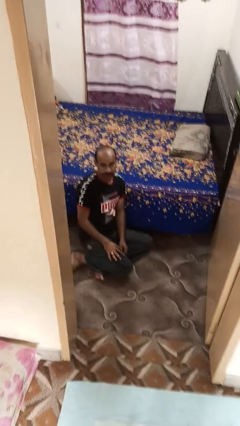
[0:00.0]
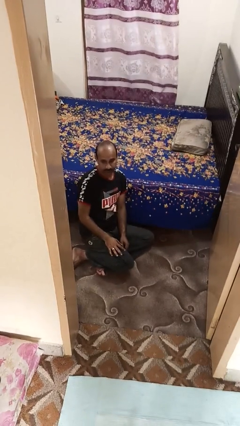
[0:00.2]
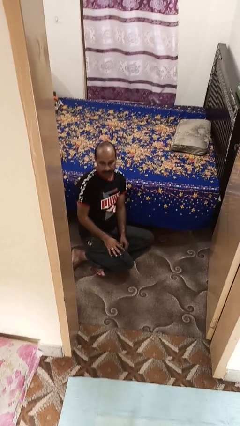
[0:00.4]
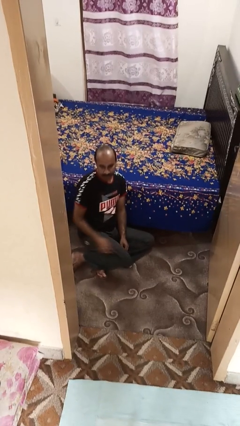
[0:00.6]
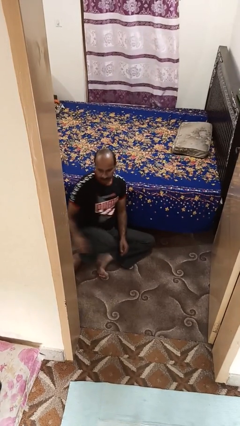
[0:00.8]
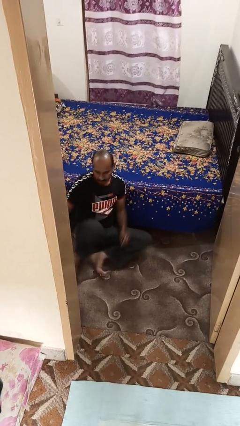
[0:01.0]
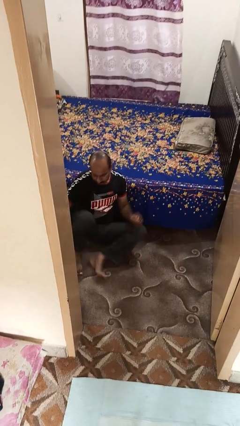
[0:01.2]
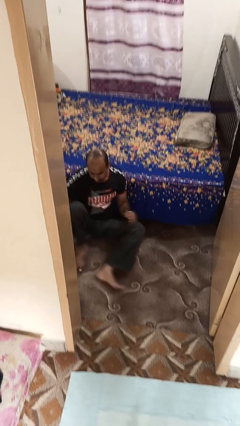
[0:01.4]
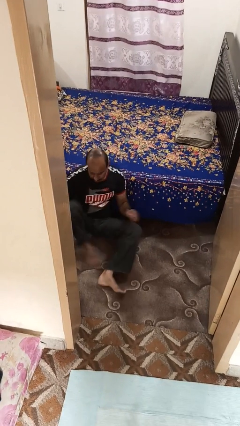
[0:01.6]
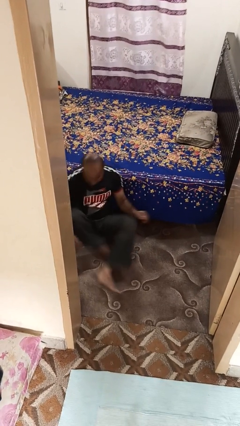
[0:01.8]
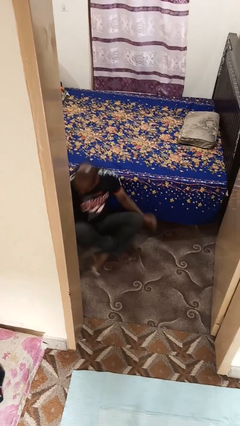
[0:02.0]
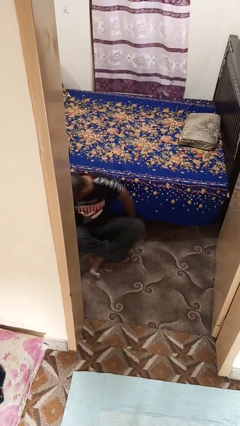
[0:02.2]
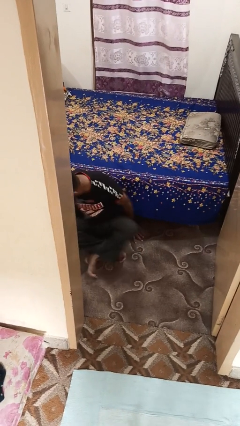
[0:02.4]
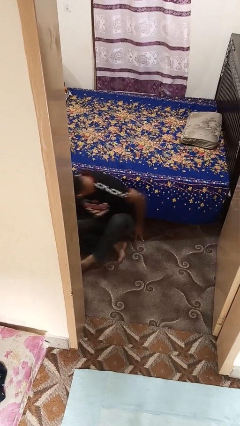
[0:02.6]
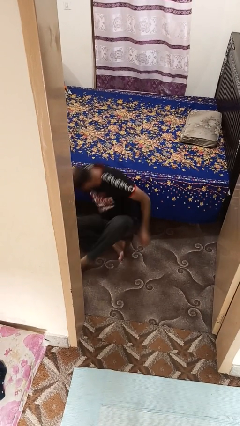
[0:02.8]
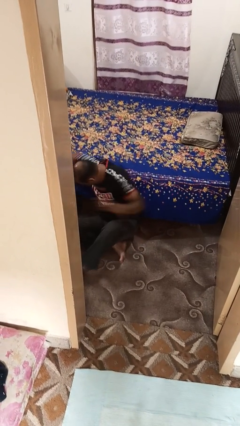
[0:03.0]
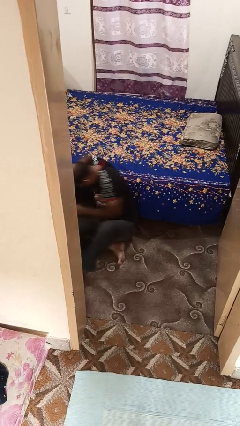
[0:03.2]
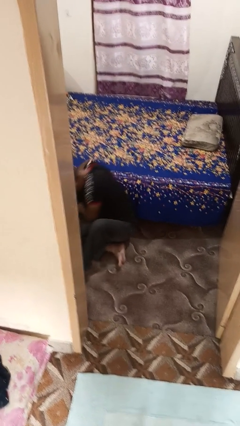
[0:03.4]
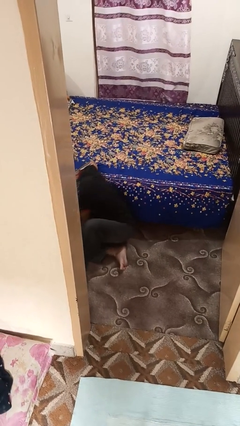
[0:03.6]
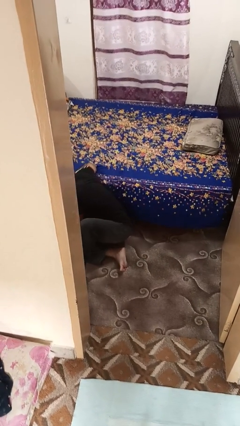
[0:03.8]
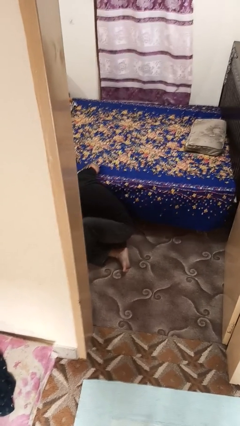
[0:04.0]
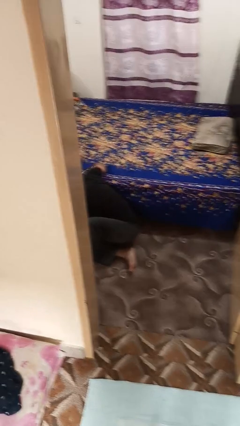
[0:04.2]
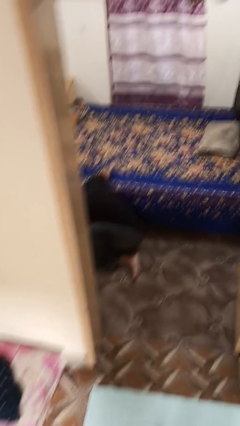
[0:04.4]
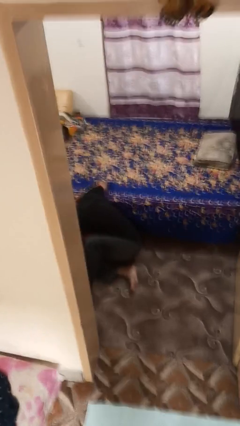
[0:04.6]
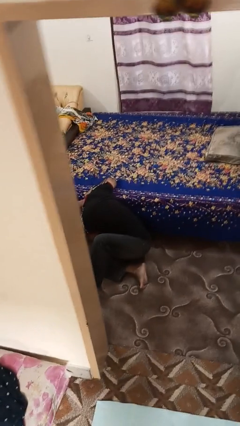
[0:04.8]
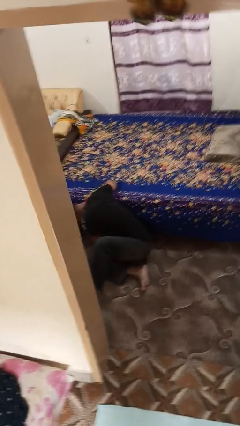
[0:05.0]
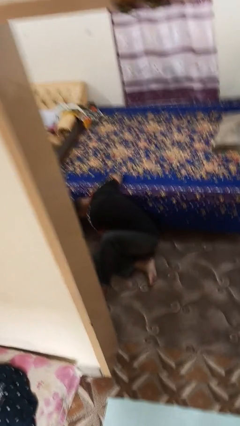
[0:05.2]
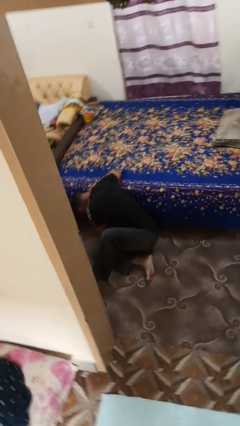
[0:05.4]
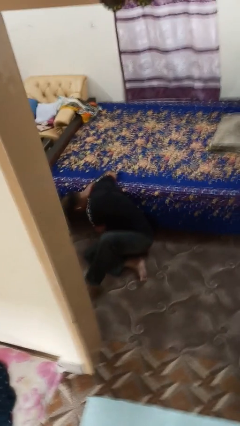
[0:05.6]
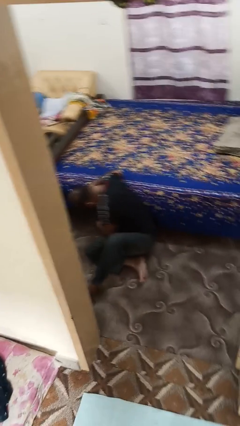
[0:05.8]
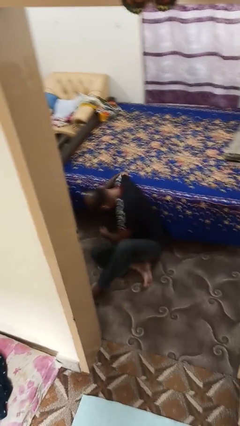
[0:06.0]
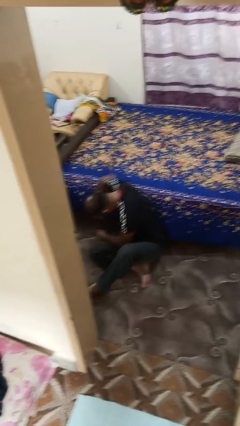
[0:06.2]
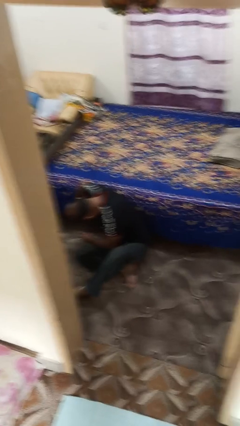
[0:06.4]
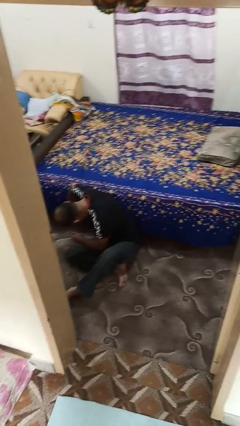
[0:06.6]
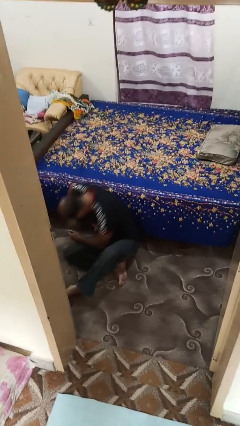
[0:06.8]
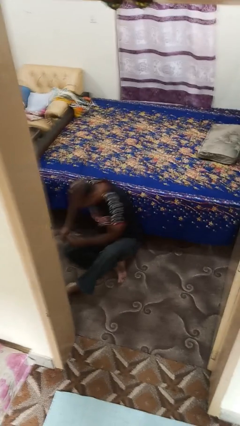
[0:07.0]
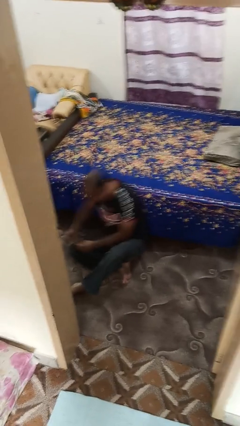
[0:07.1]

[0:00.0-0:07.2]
person searches under bed

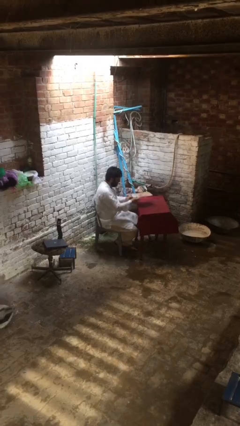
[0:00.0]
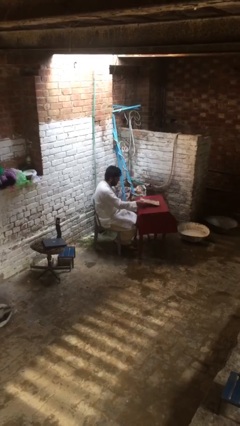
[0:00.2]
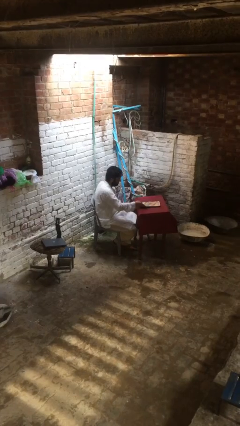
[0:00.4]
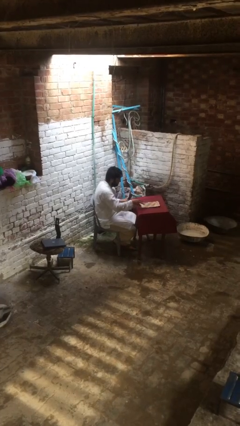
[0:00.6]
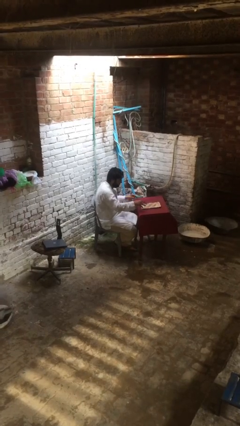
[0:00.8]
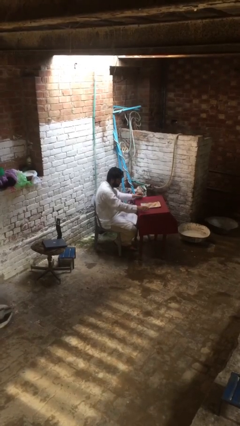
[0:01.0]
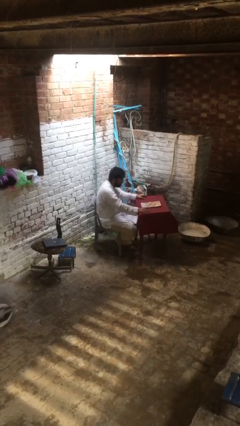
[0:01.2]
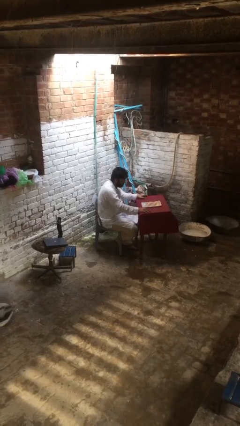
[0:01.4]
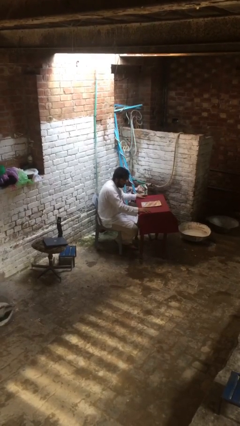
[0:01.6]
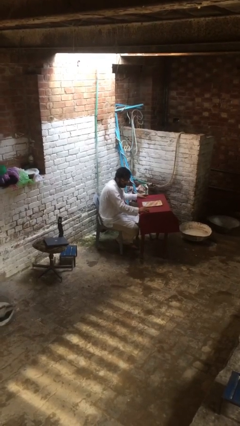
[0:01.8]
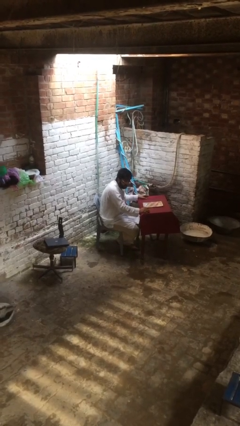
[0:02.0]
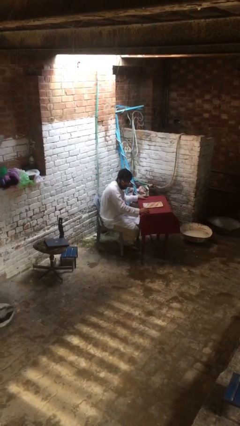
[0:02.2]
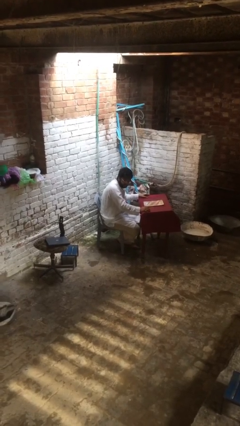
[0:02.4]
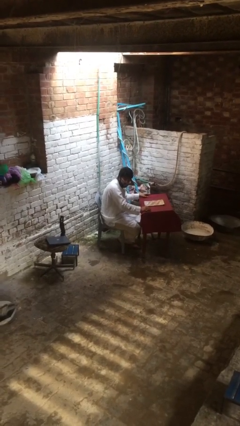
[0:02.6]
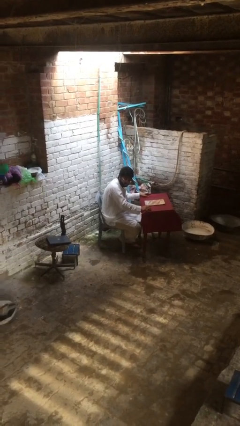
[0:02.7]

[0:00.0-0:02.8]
person puts down object on table

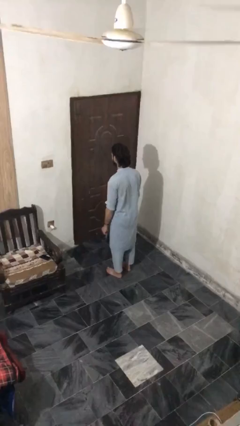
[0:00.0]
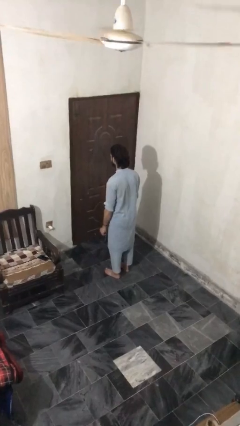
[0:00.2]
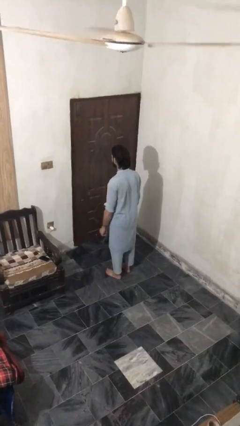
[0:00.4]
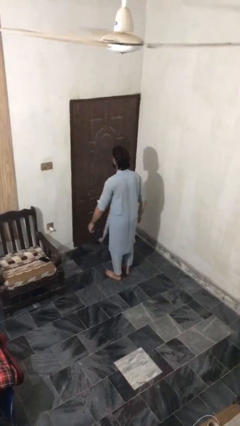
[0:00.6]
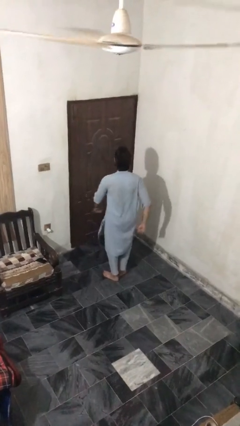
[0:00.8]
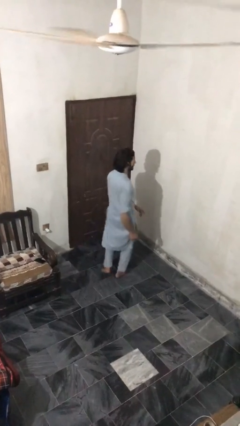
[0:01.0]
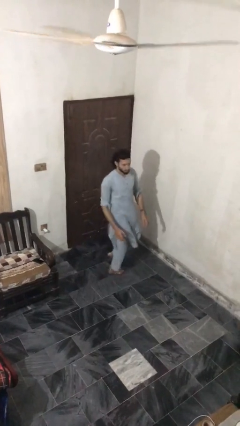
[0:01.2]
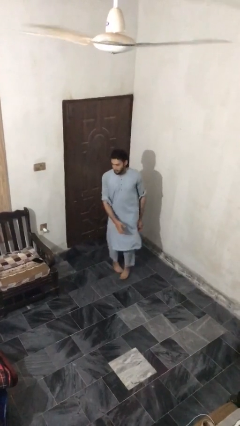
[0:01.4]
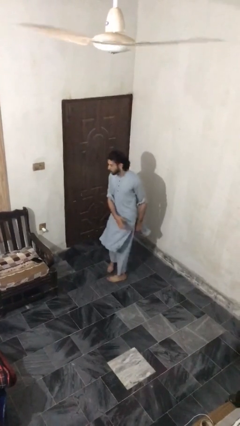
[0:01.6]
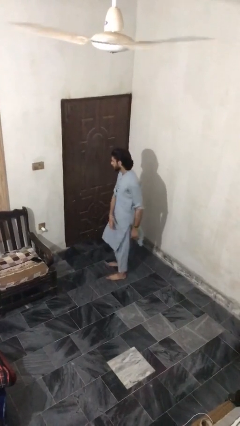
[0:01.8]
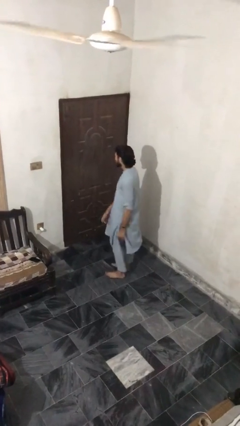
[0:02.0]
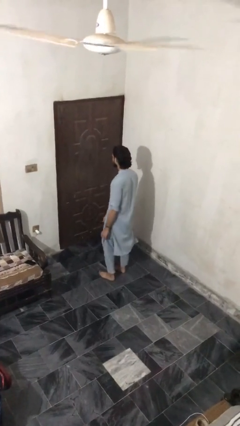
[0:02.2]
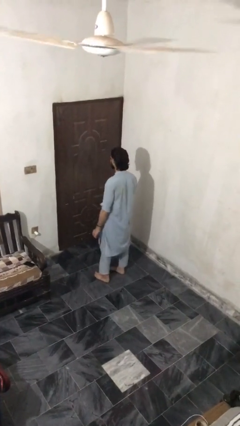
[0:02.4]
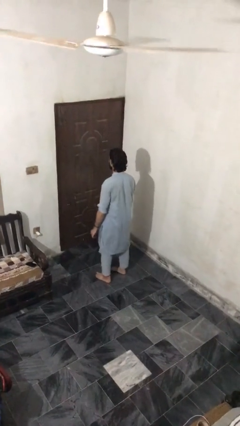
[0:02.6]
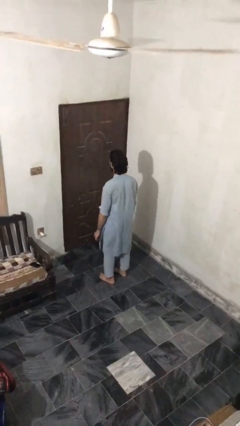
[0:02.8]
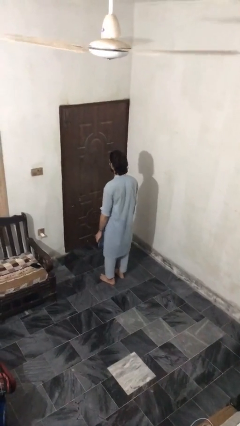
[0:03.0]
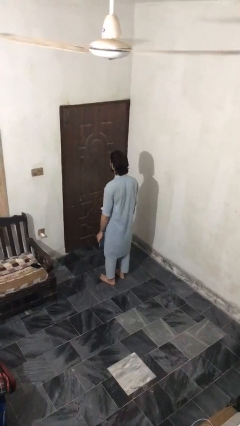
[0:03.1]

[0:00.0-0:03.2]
person twirls

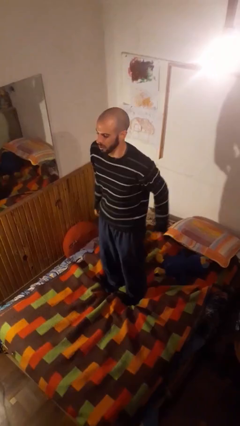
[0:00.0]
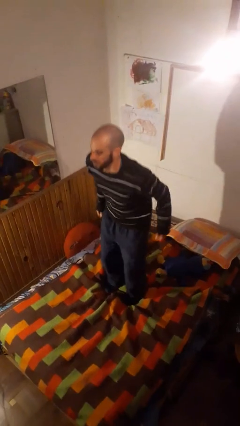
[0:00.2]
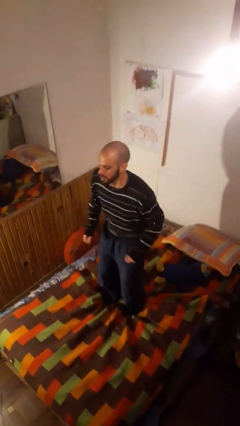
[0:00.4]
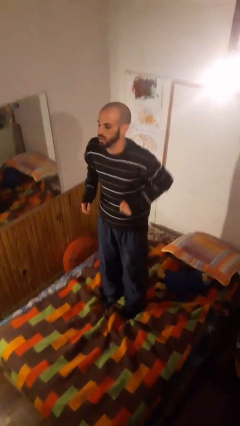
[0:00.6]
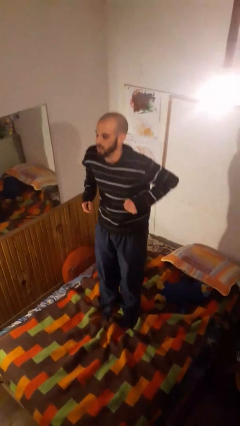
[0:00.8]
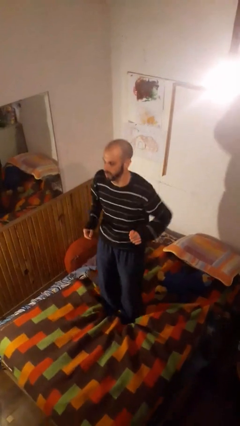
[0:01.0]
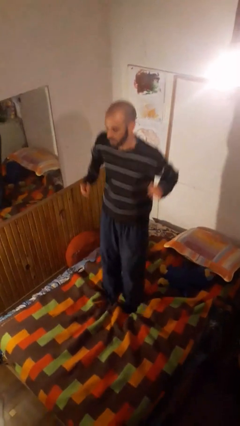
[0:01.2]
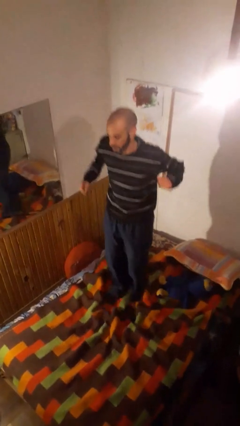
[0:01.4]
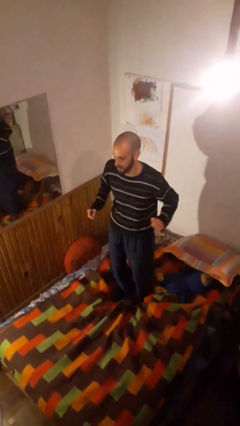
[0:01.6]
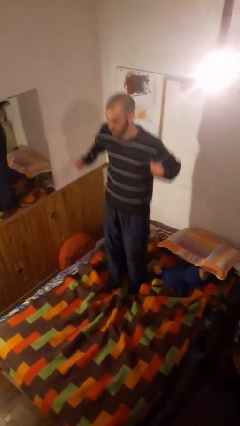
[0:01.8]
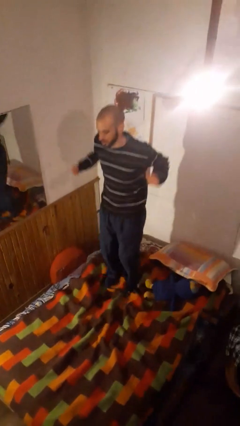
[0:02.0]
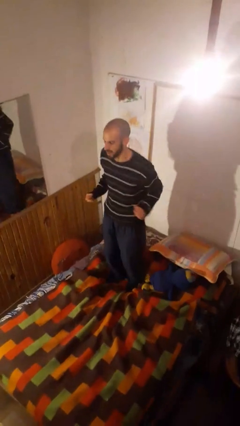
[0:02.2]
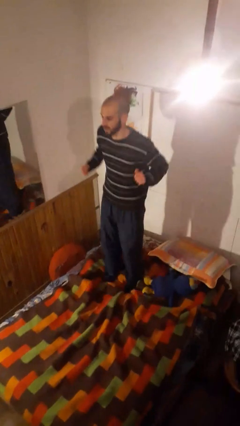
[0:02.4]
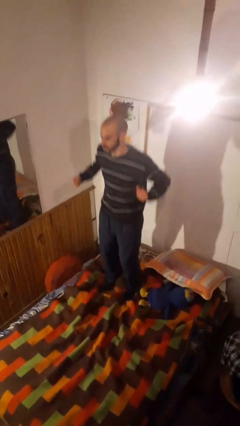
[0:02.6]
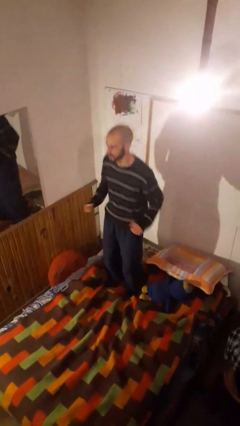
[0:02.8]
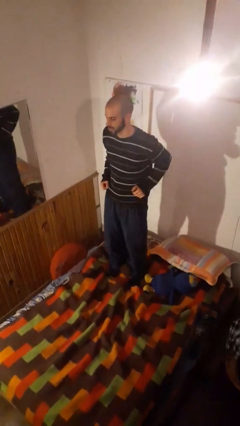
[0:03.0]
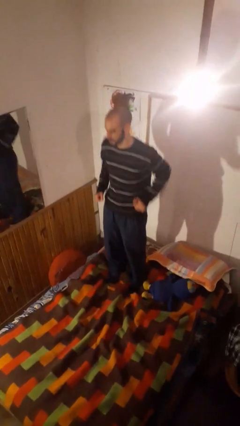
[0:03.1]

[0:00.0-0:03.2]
person jumps on bed

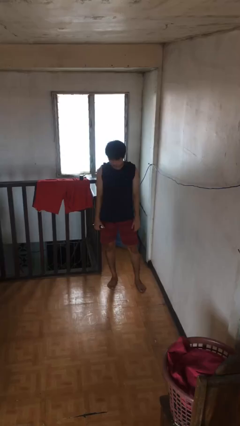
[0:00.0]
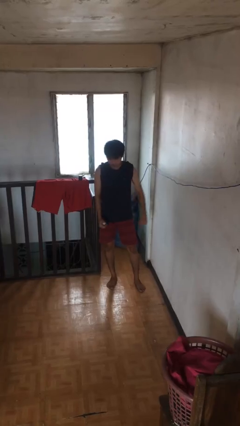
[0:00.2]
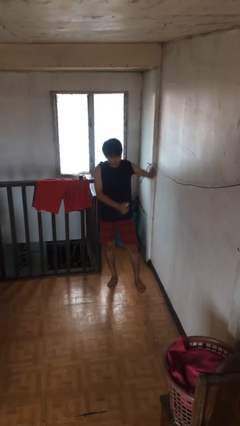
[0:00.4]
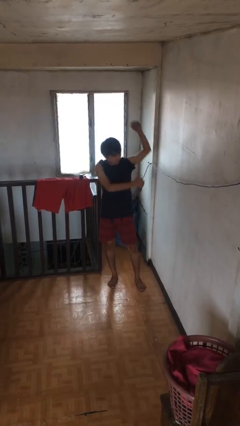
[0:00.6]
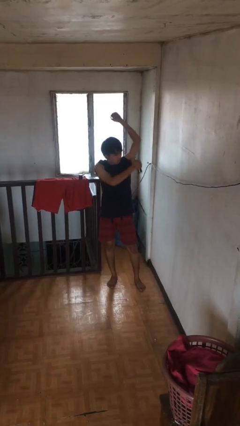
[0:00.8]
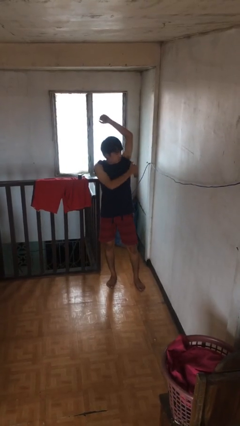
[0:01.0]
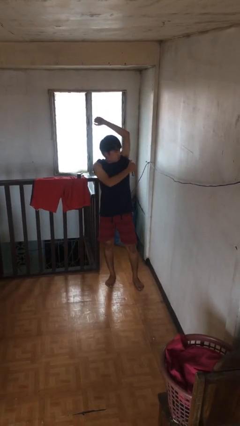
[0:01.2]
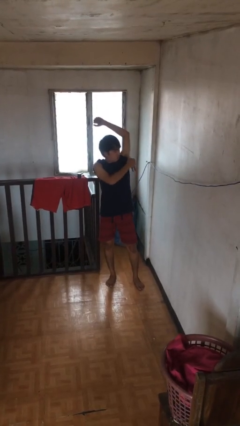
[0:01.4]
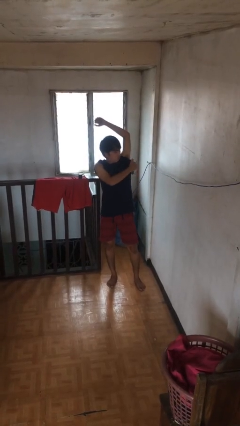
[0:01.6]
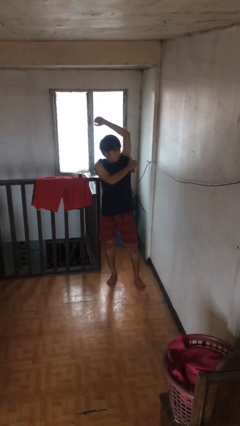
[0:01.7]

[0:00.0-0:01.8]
person applies deodorant
